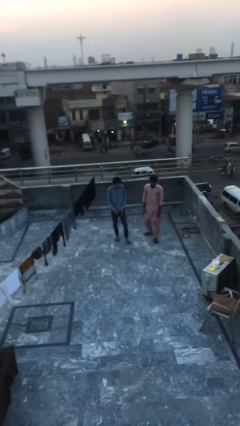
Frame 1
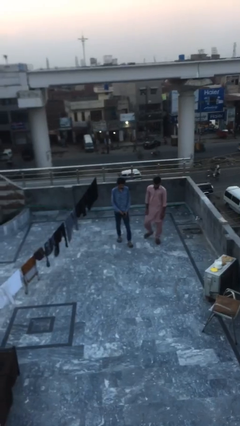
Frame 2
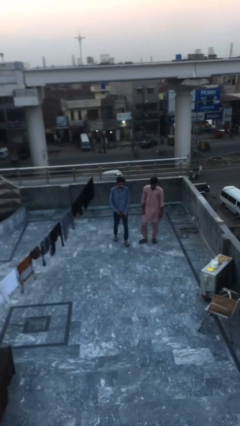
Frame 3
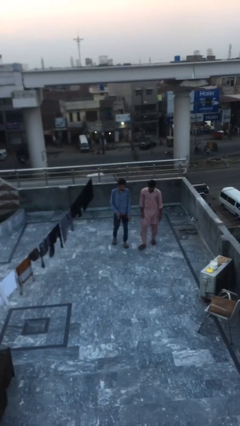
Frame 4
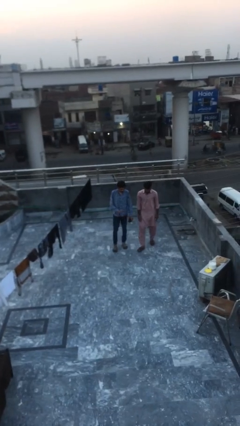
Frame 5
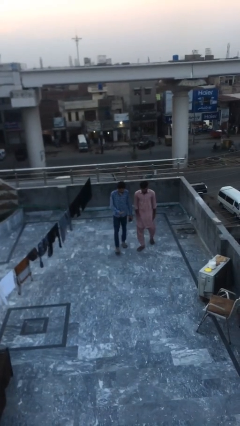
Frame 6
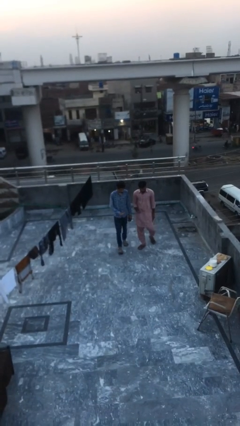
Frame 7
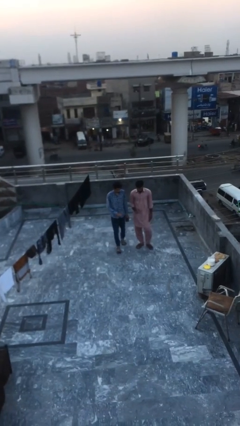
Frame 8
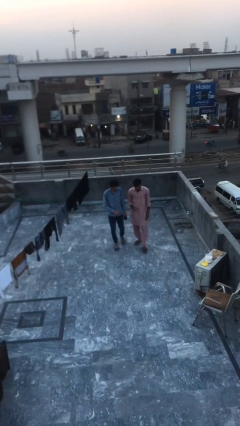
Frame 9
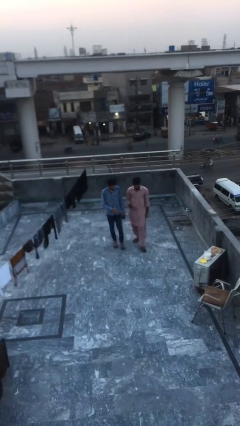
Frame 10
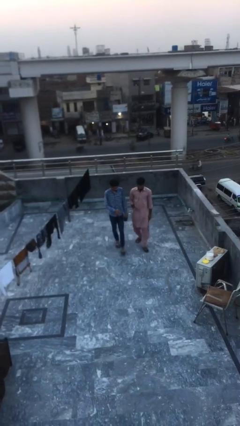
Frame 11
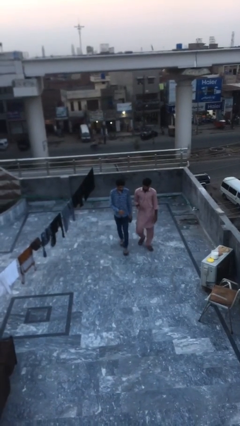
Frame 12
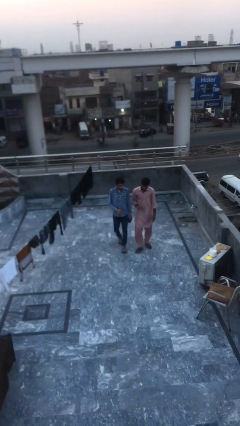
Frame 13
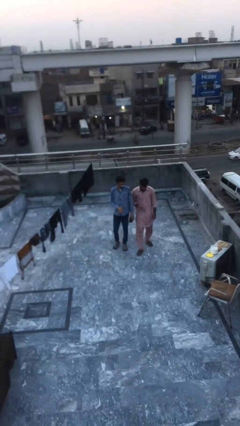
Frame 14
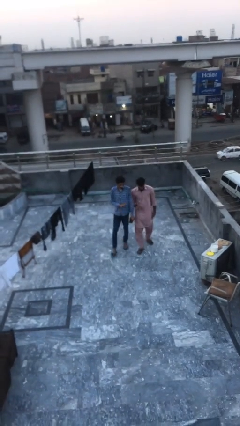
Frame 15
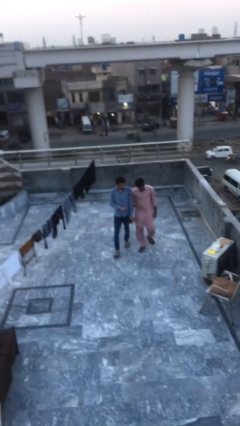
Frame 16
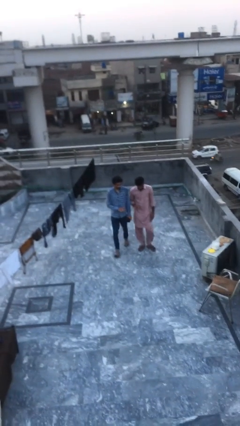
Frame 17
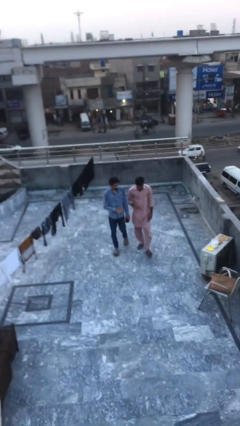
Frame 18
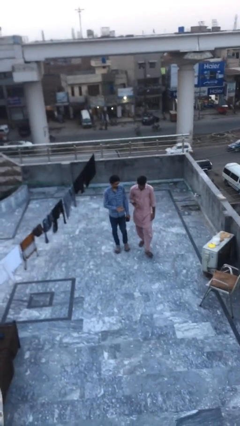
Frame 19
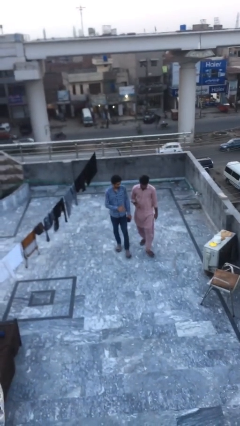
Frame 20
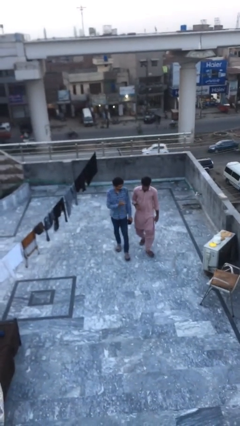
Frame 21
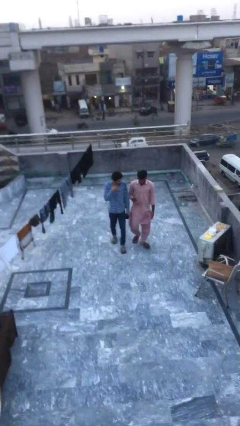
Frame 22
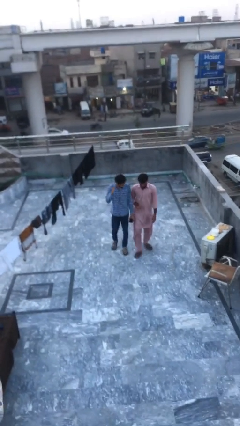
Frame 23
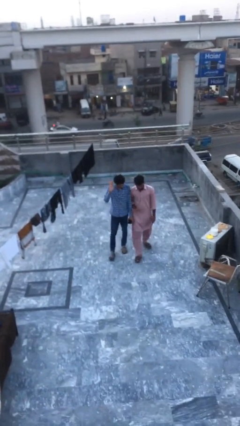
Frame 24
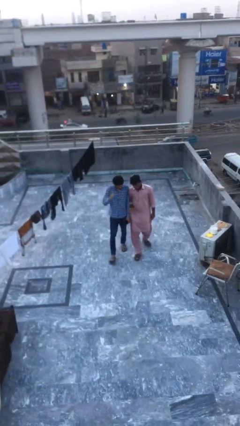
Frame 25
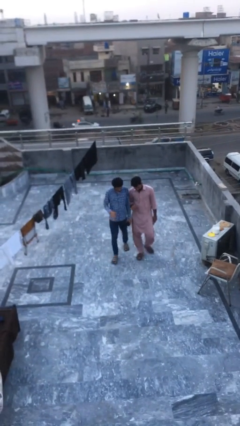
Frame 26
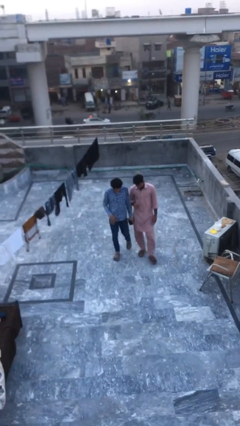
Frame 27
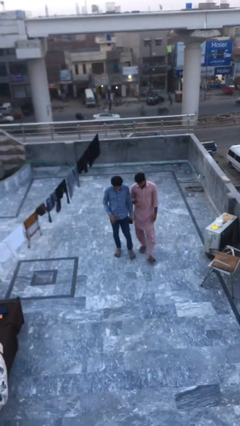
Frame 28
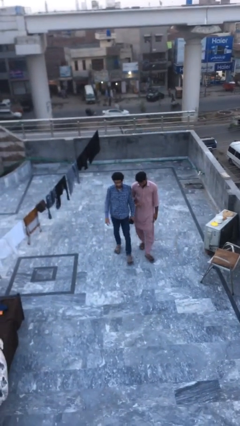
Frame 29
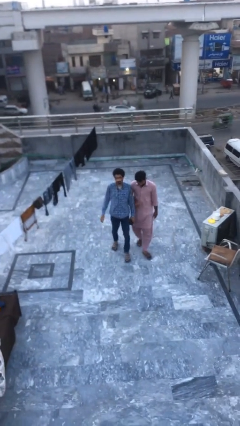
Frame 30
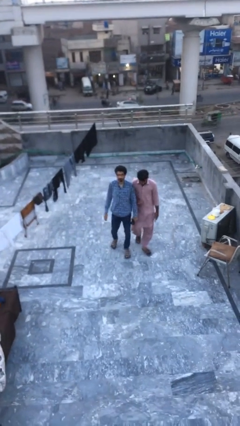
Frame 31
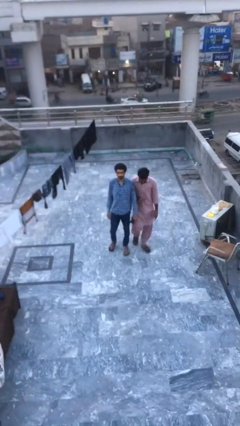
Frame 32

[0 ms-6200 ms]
person talks to person

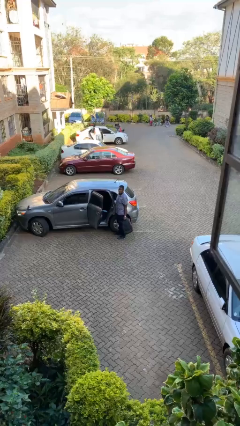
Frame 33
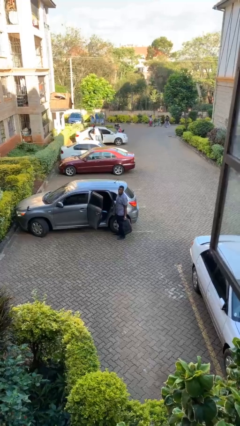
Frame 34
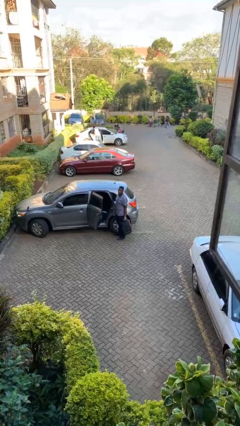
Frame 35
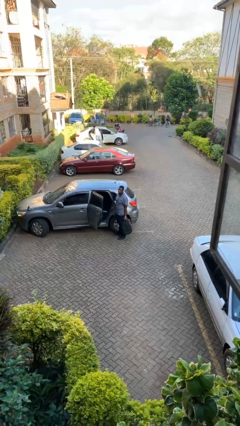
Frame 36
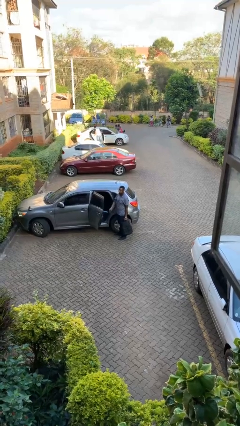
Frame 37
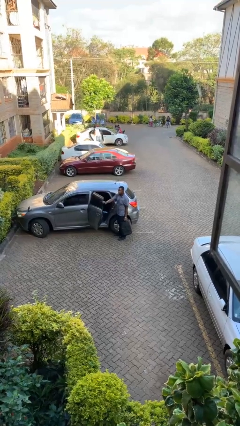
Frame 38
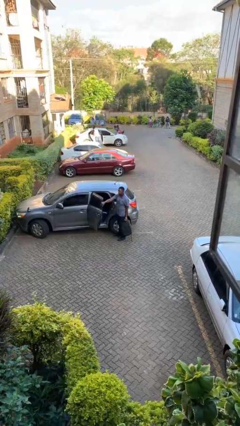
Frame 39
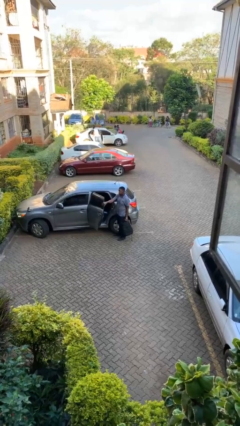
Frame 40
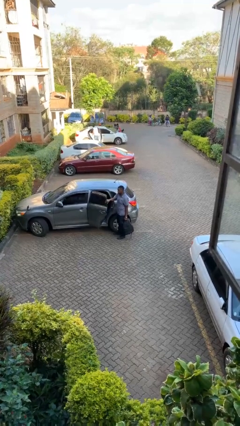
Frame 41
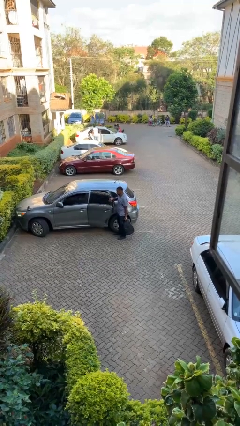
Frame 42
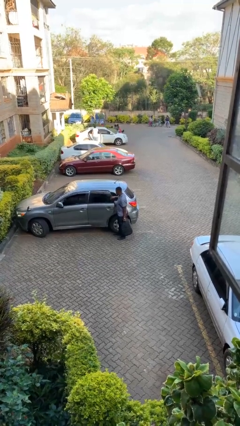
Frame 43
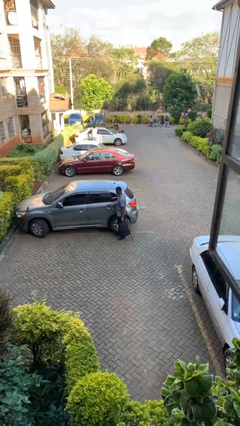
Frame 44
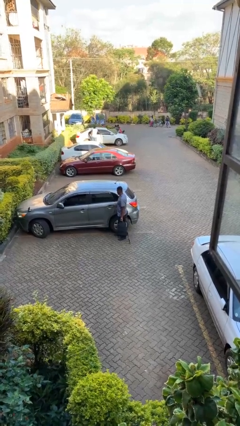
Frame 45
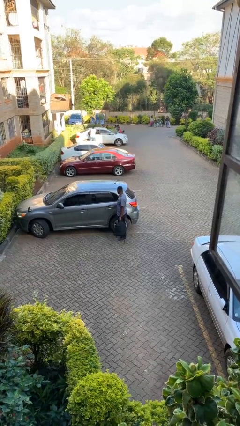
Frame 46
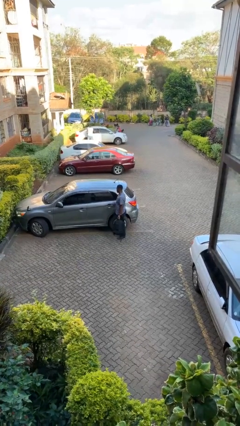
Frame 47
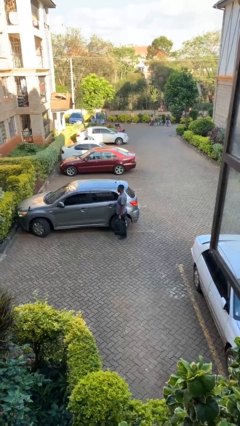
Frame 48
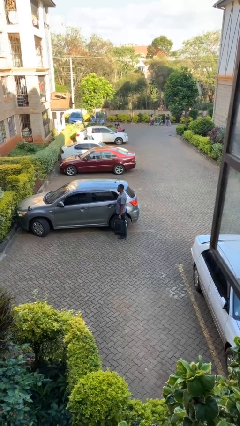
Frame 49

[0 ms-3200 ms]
person closes car door

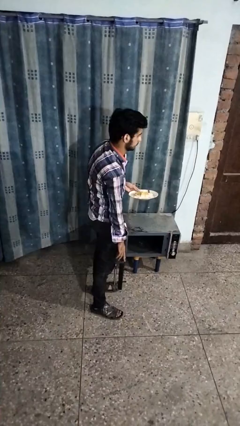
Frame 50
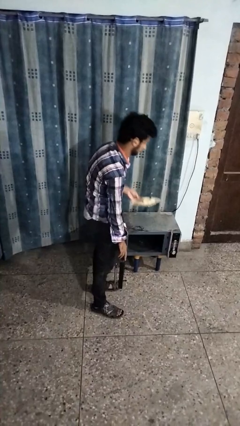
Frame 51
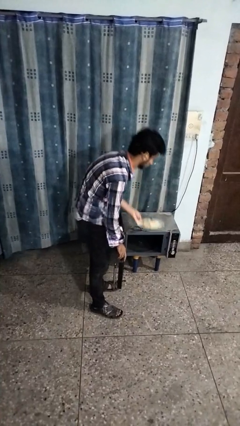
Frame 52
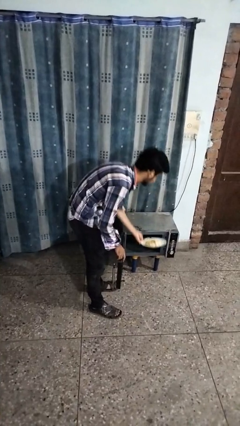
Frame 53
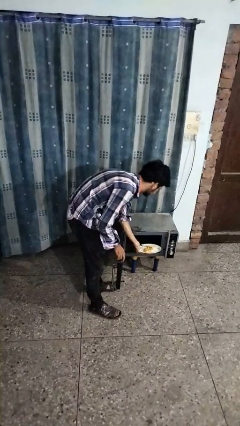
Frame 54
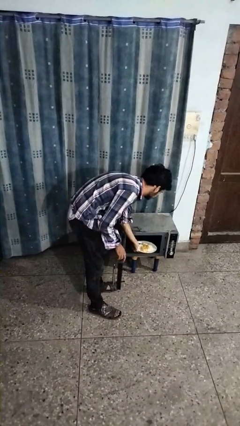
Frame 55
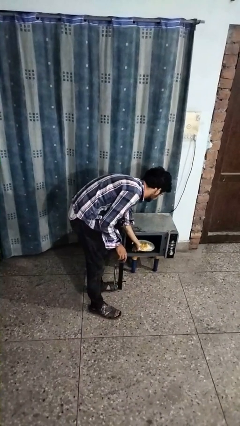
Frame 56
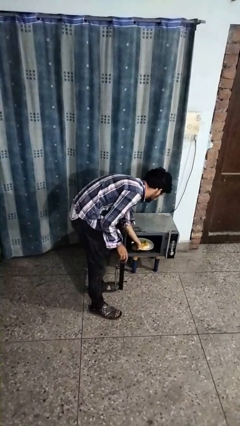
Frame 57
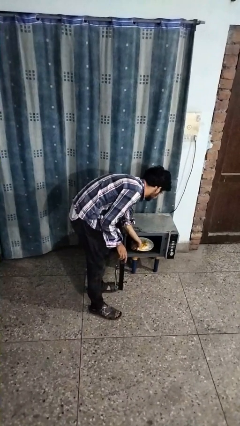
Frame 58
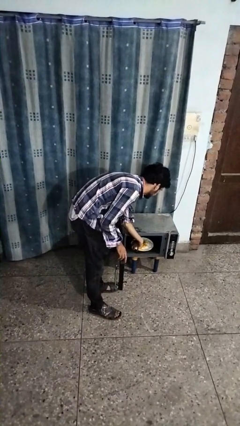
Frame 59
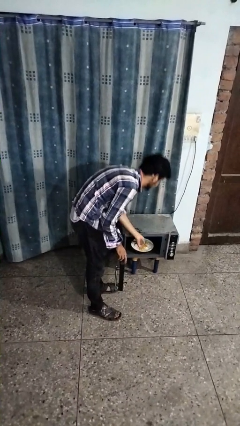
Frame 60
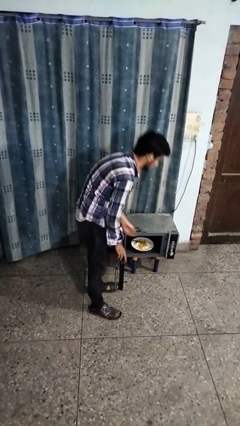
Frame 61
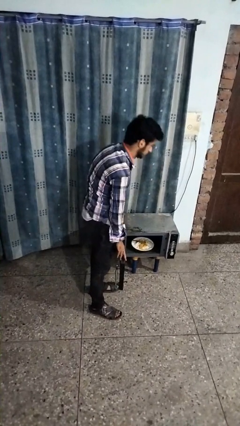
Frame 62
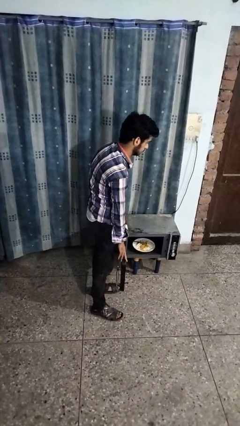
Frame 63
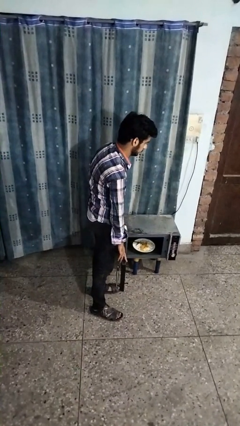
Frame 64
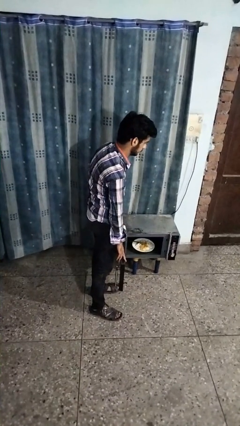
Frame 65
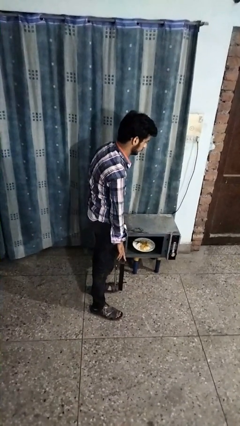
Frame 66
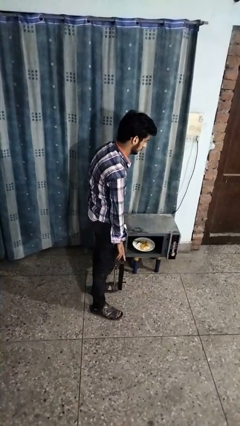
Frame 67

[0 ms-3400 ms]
person puts object into oven

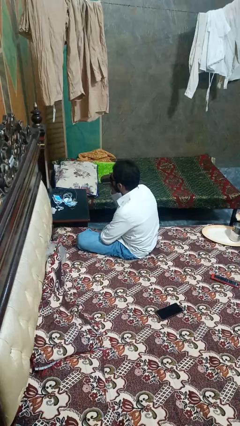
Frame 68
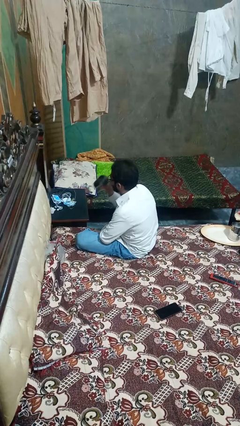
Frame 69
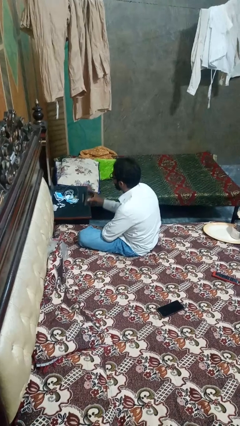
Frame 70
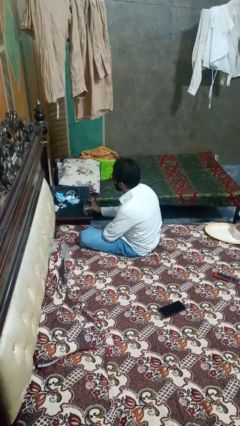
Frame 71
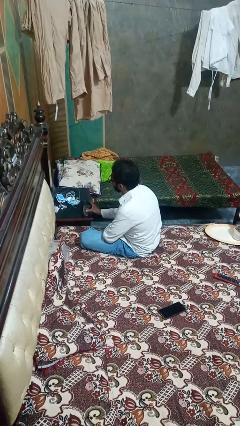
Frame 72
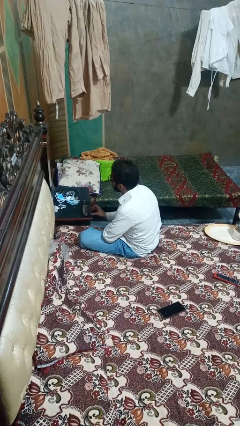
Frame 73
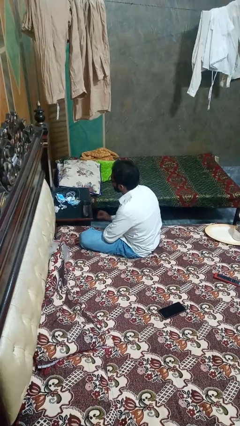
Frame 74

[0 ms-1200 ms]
person puts down object on table

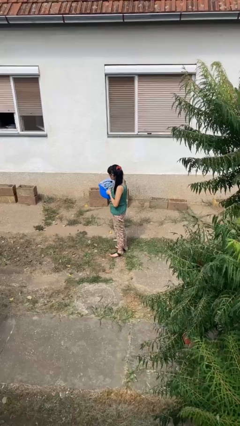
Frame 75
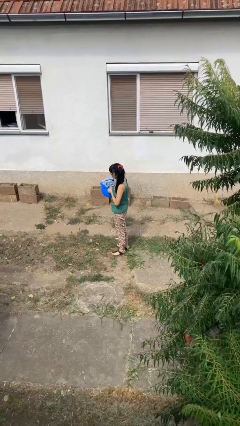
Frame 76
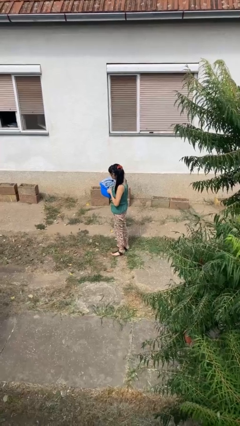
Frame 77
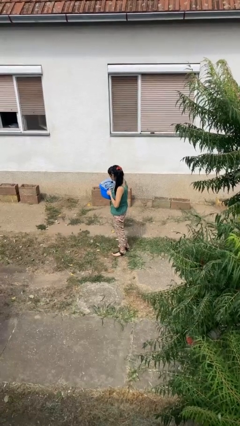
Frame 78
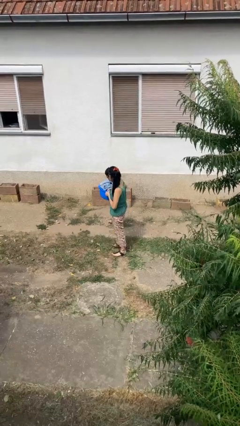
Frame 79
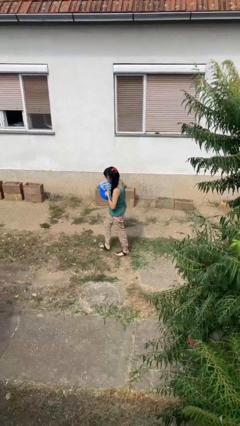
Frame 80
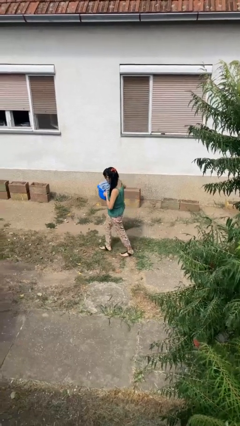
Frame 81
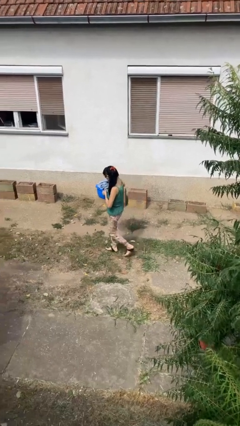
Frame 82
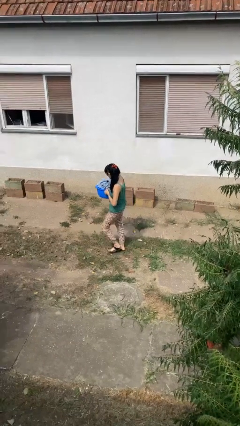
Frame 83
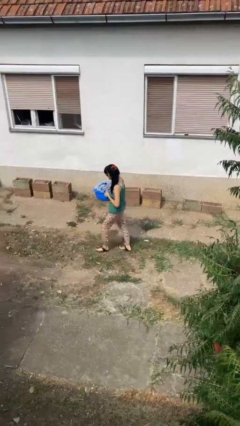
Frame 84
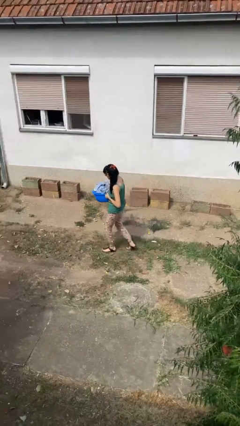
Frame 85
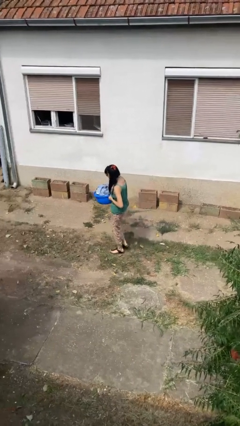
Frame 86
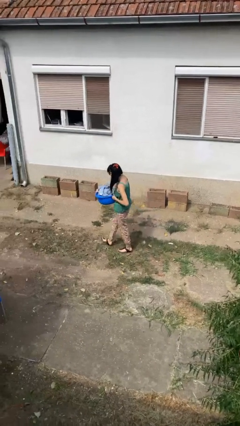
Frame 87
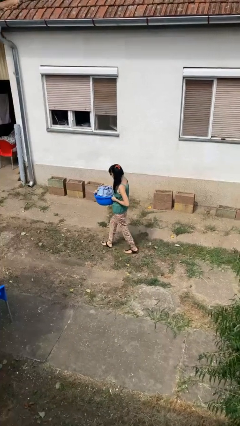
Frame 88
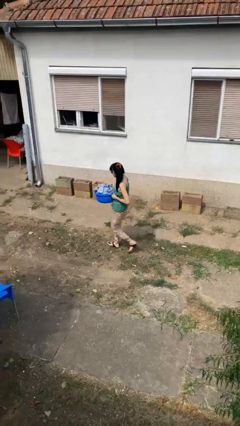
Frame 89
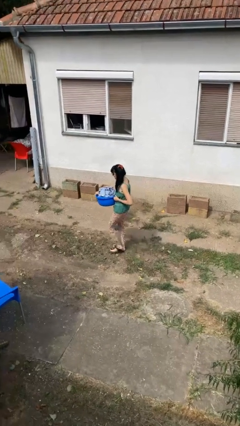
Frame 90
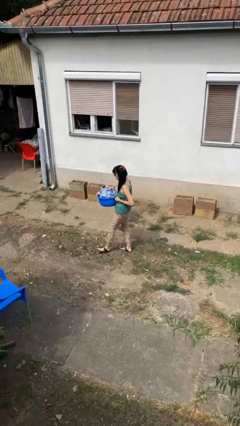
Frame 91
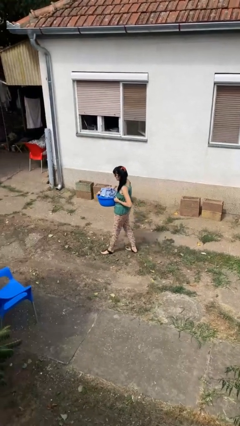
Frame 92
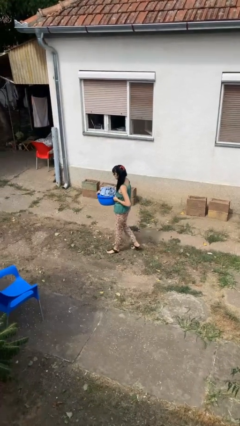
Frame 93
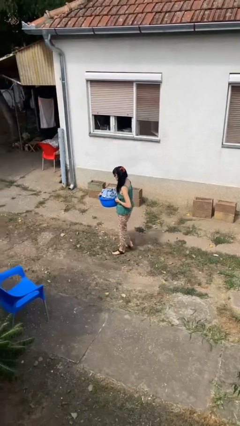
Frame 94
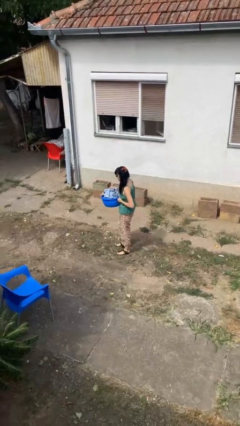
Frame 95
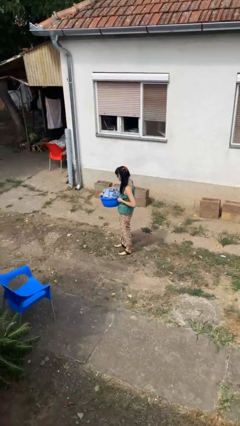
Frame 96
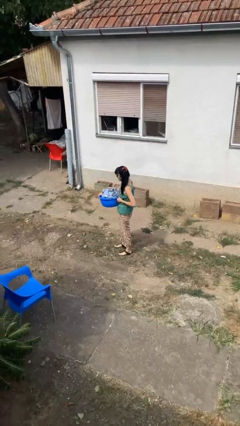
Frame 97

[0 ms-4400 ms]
person carries laundry basket
